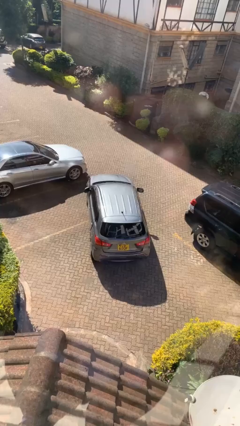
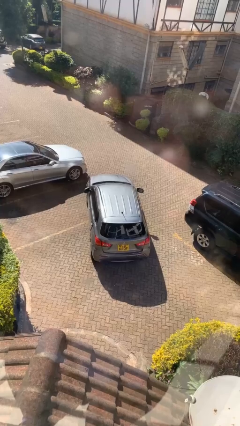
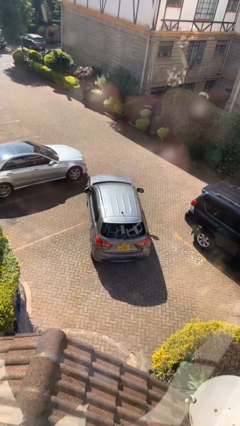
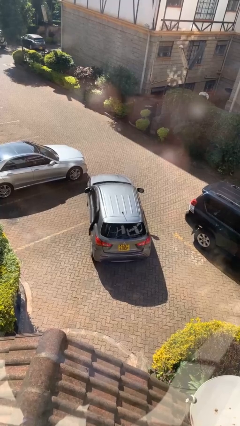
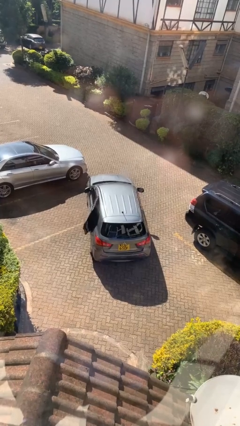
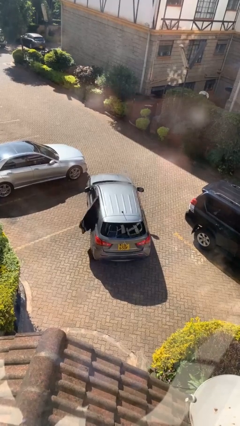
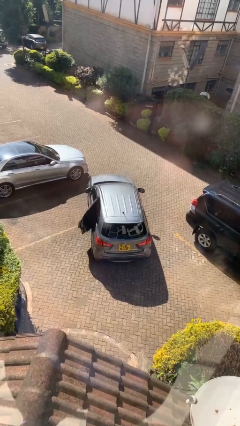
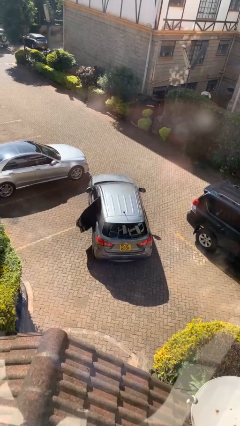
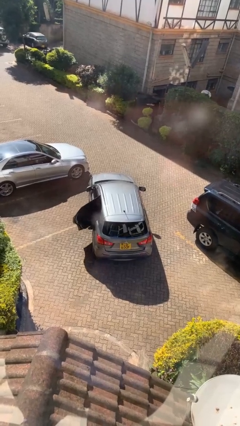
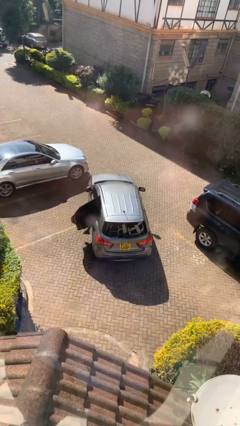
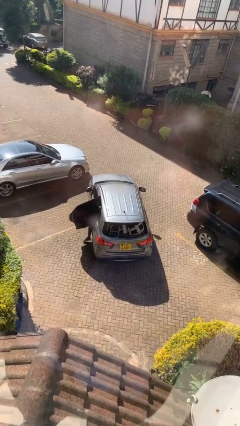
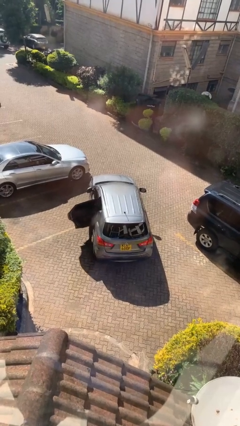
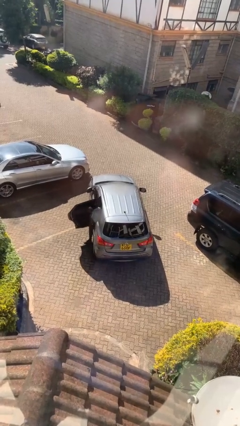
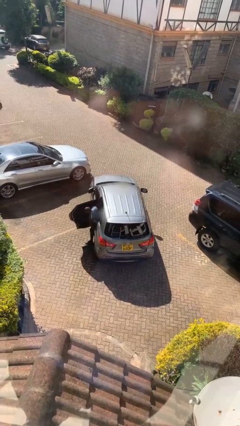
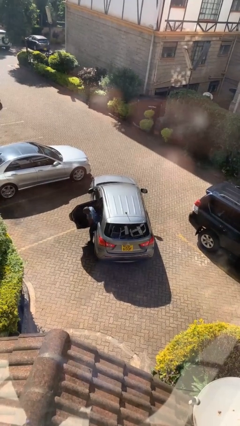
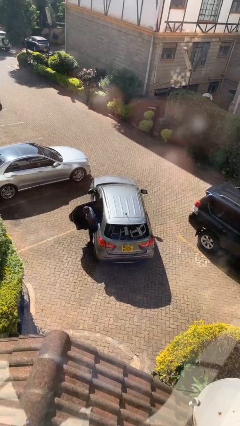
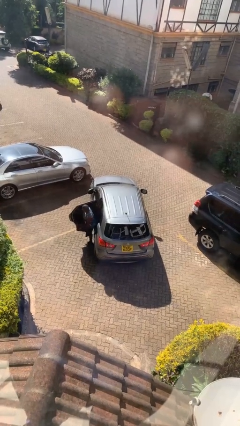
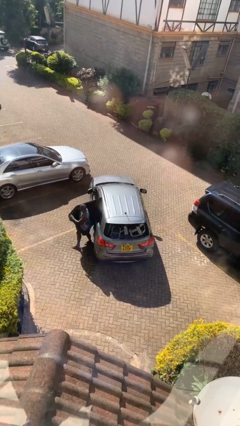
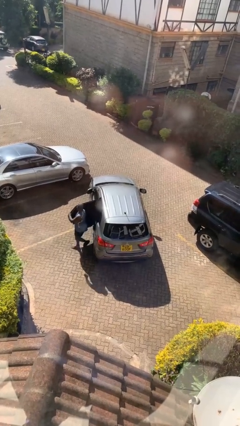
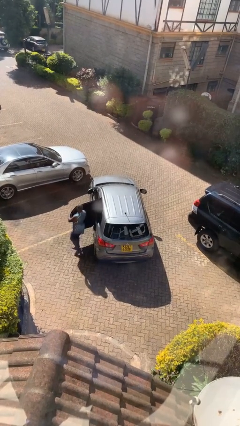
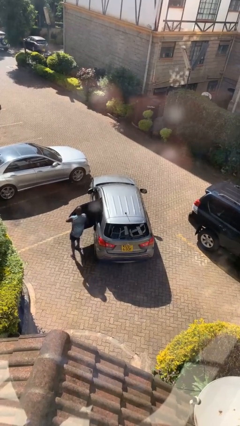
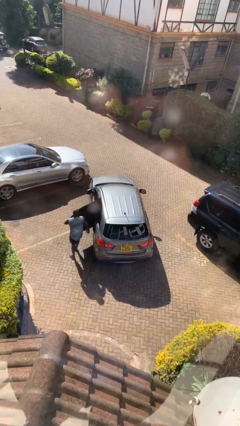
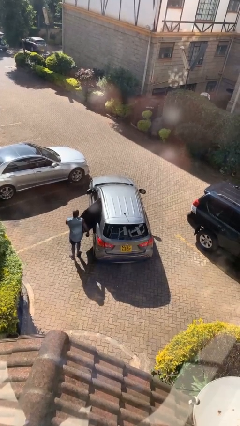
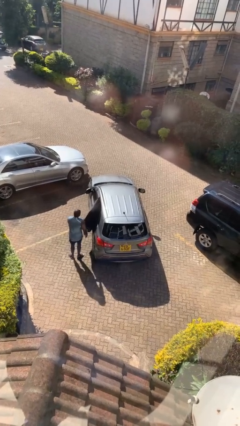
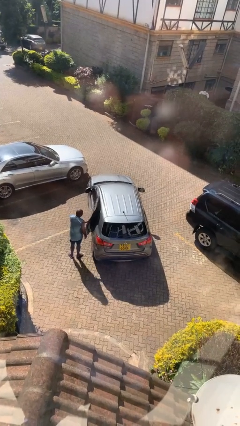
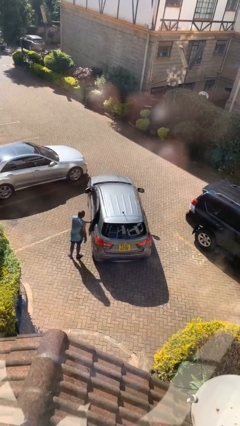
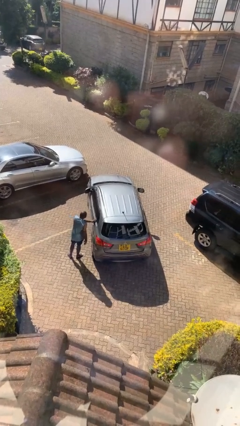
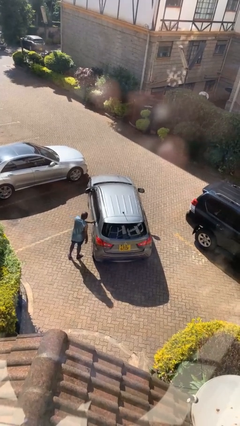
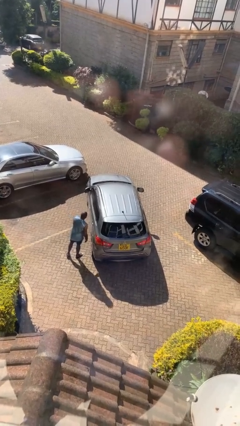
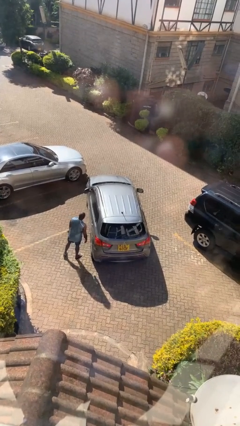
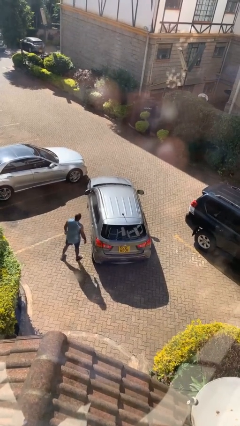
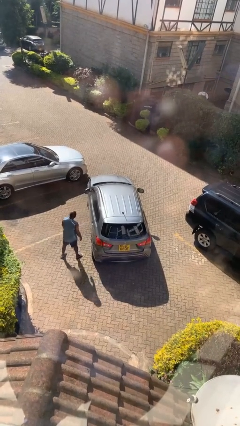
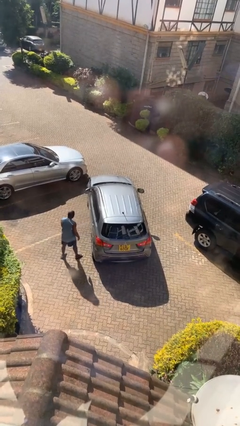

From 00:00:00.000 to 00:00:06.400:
car drops off person

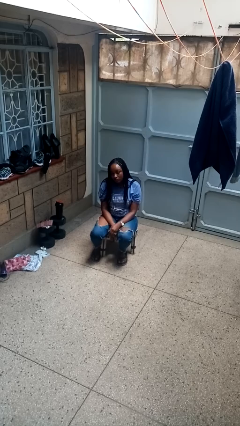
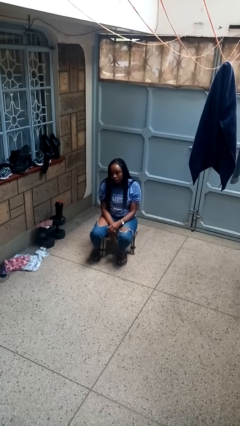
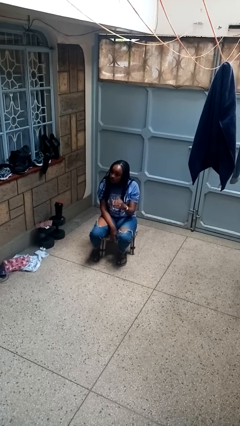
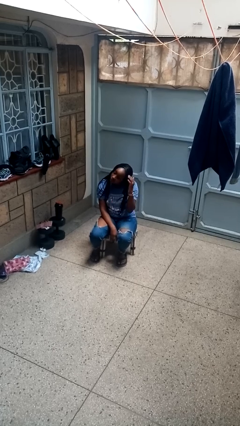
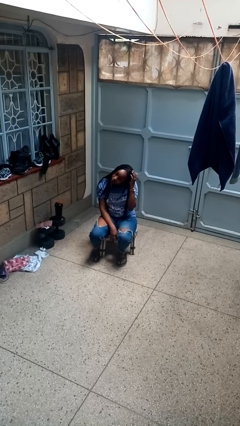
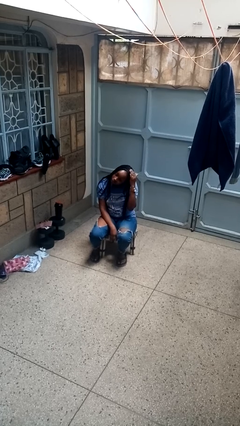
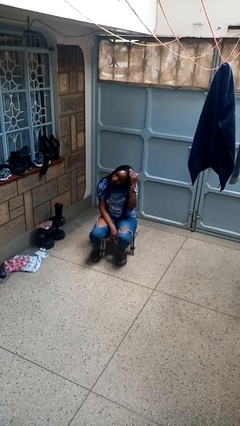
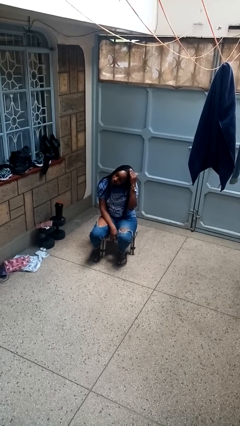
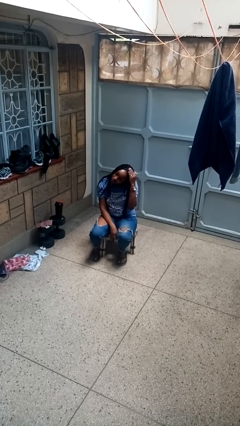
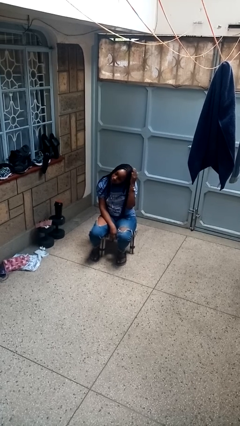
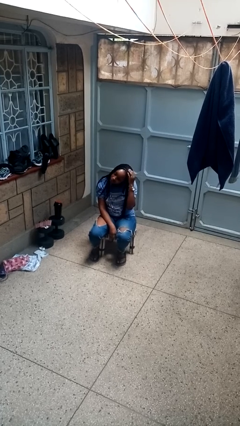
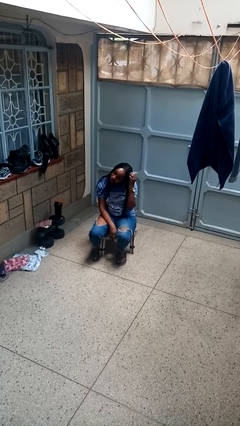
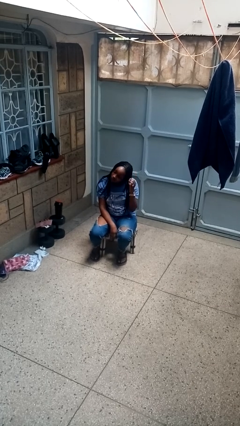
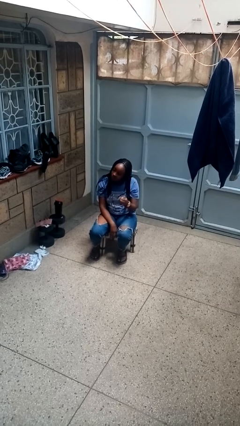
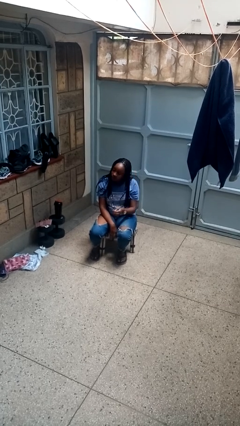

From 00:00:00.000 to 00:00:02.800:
person pats head

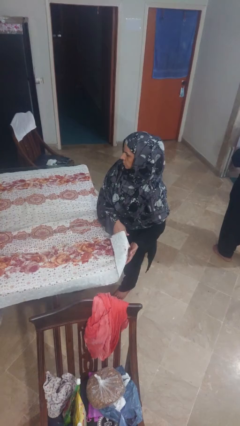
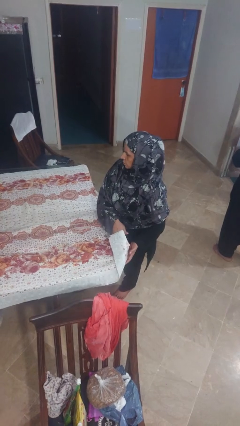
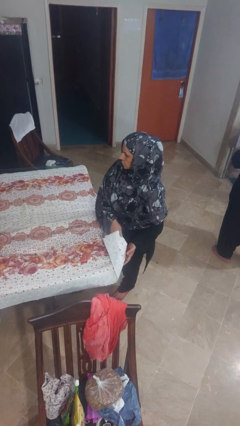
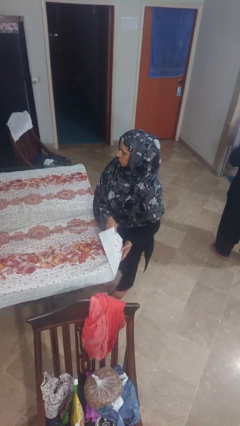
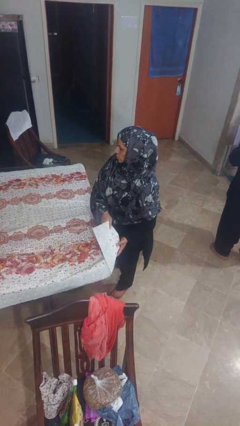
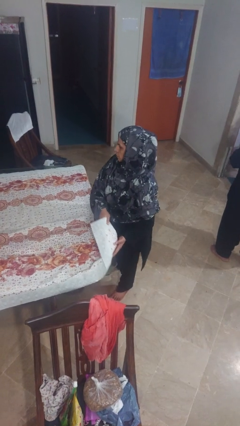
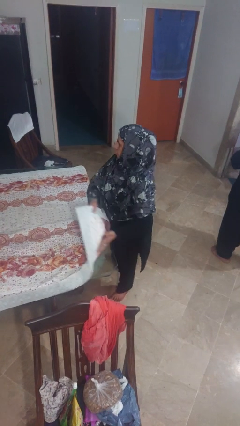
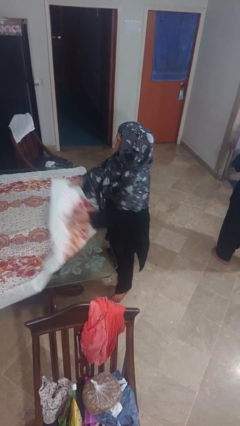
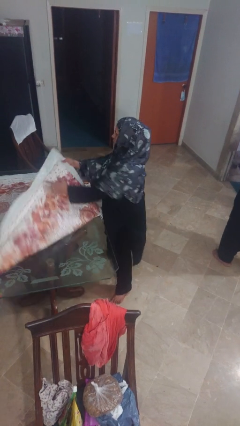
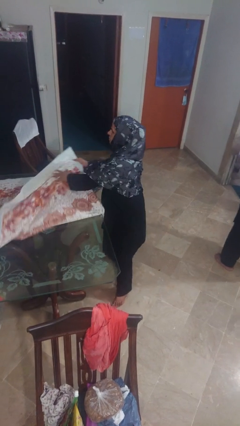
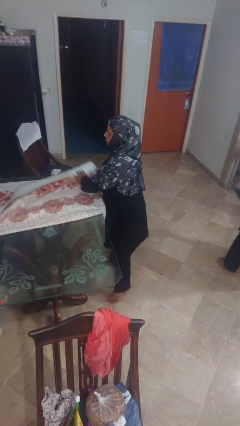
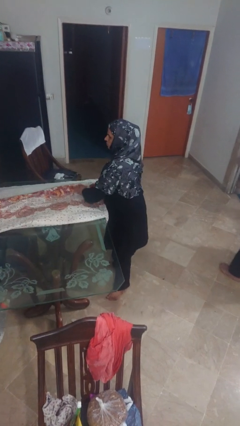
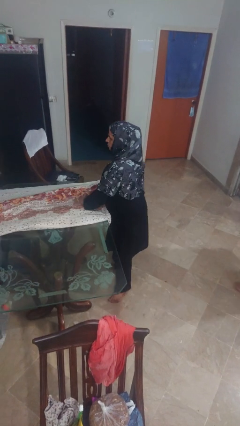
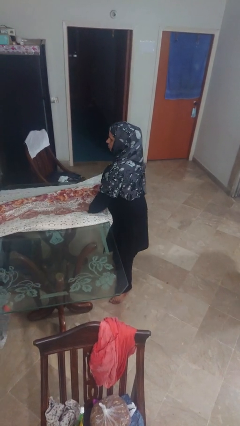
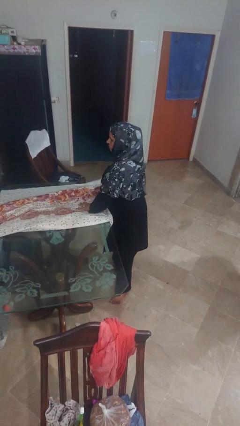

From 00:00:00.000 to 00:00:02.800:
person folds tablecloth

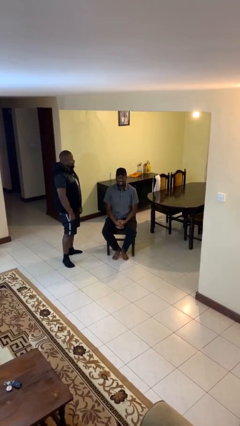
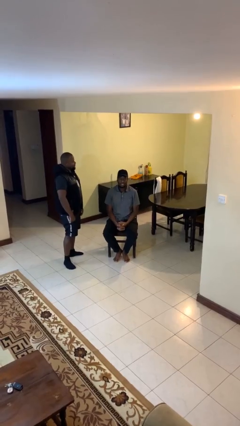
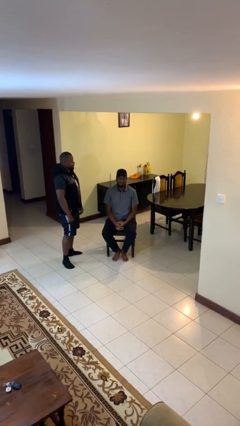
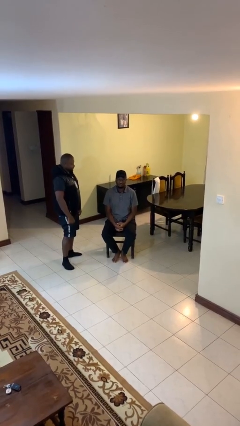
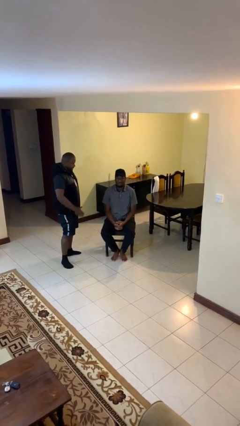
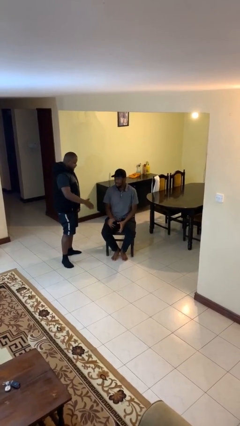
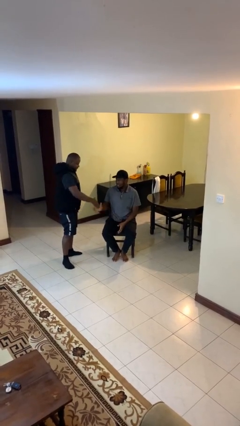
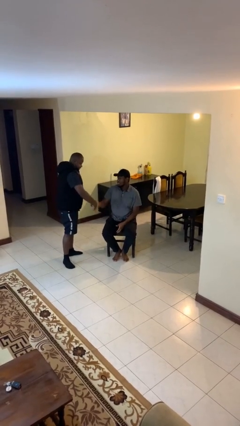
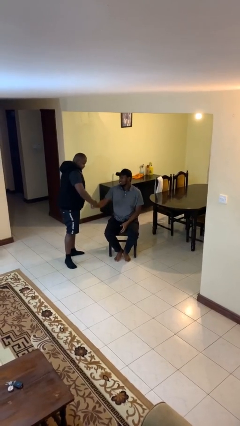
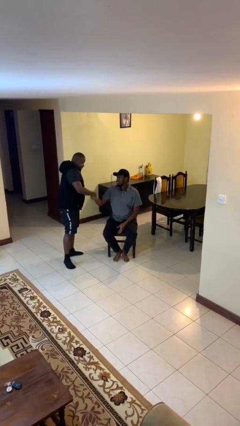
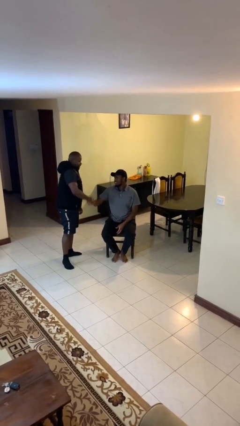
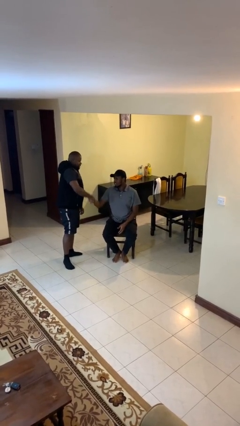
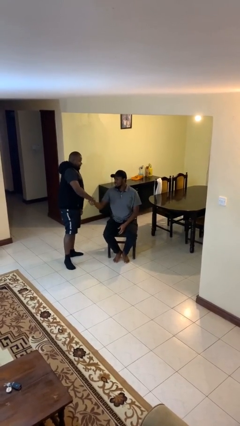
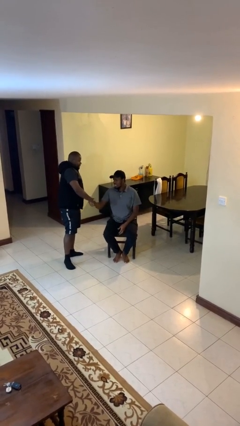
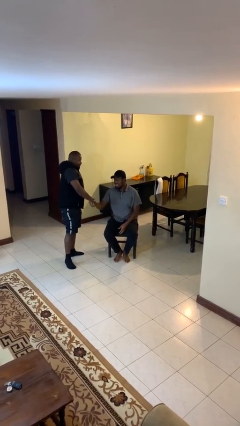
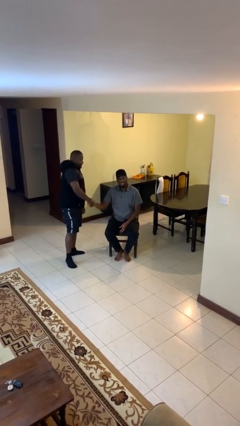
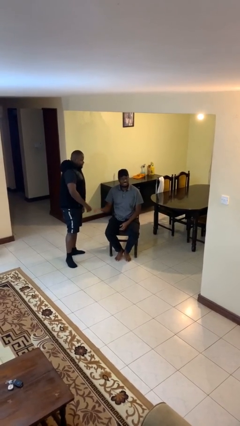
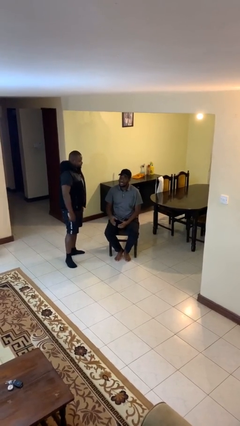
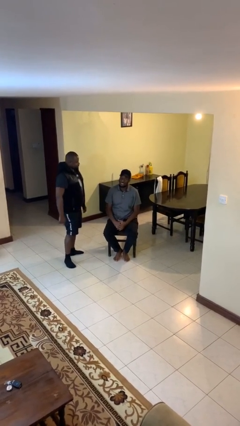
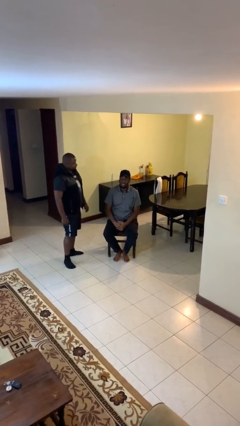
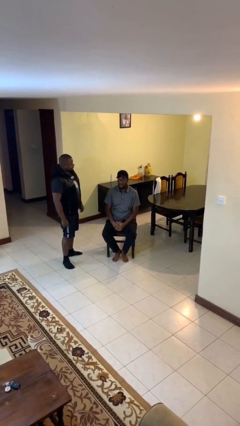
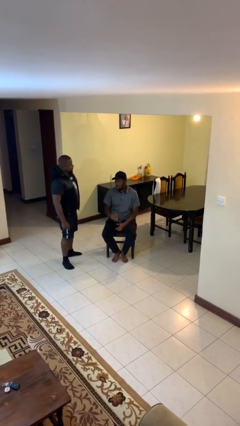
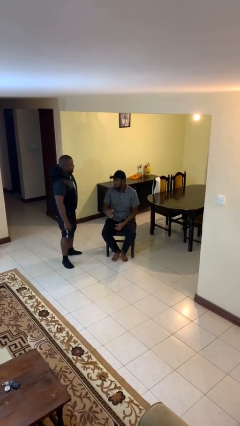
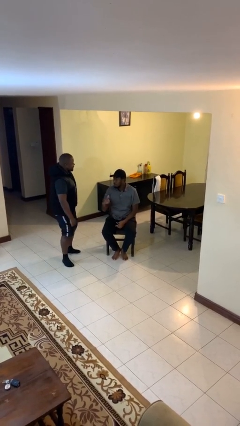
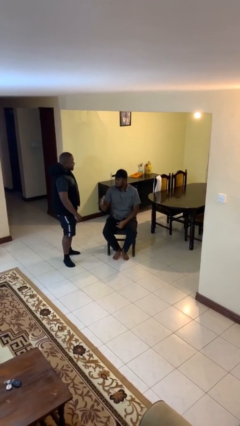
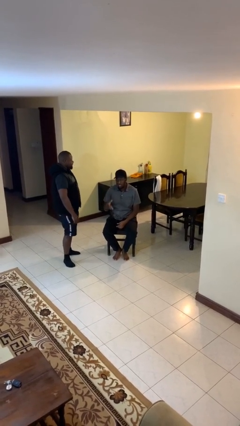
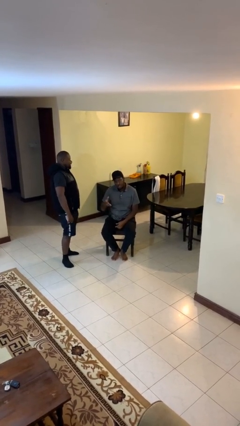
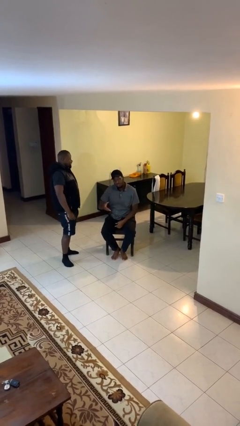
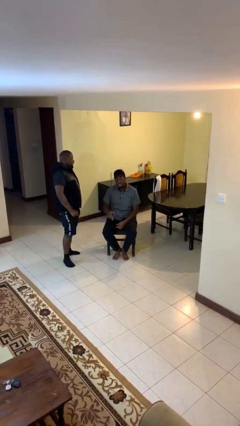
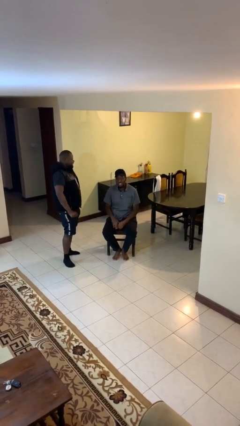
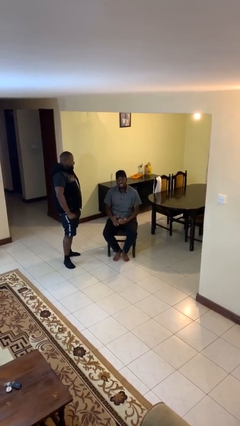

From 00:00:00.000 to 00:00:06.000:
person shakes hand
